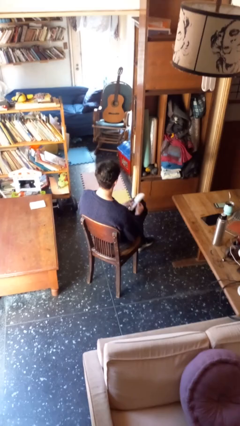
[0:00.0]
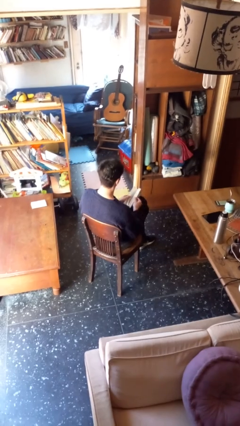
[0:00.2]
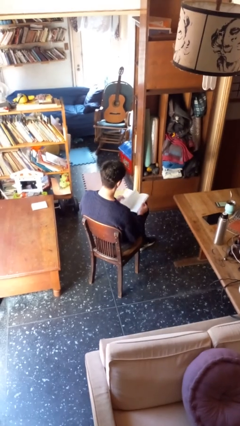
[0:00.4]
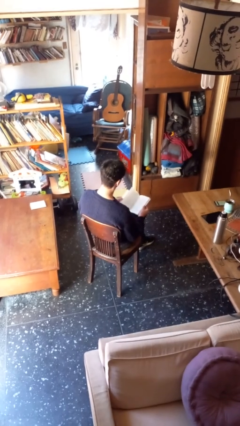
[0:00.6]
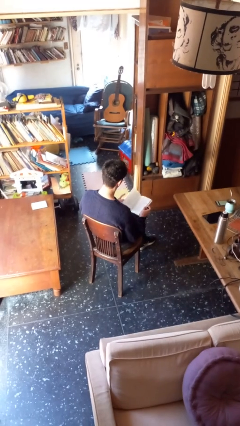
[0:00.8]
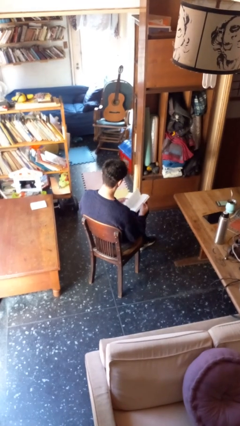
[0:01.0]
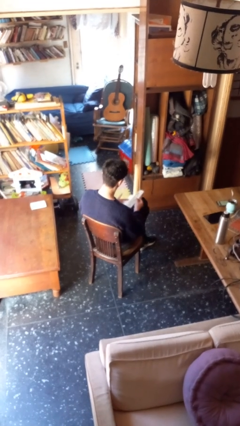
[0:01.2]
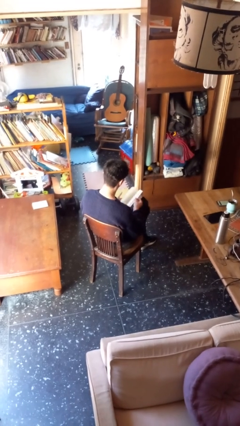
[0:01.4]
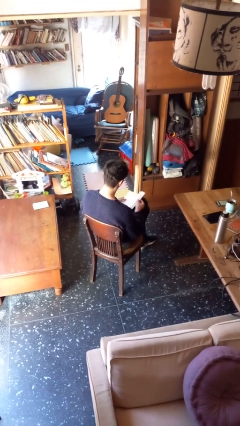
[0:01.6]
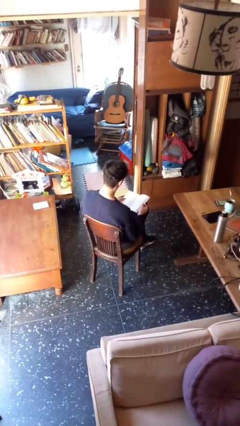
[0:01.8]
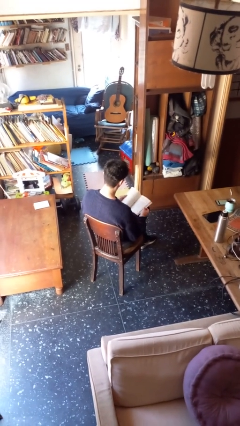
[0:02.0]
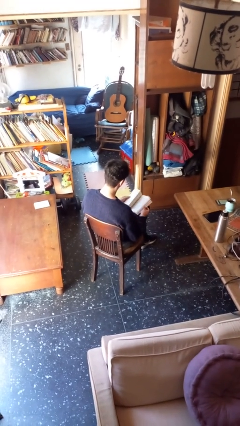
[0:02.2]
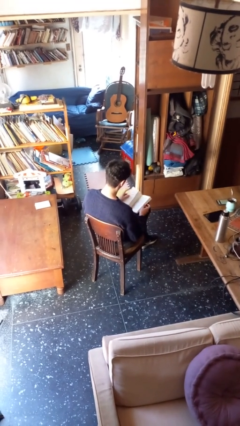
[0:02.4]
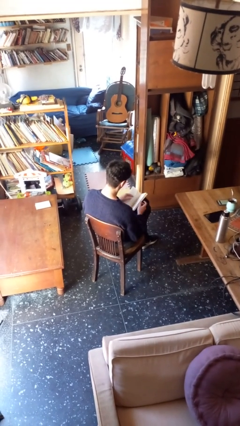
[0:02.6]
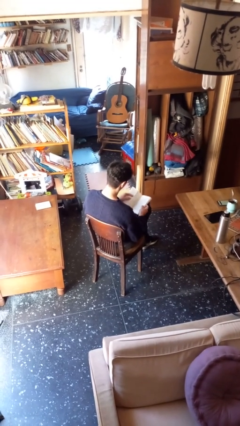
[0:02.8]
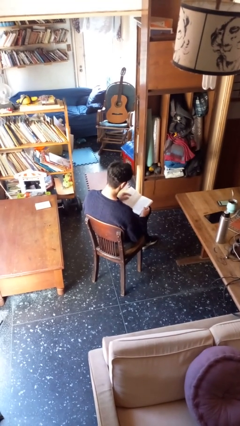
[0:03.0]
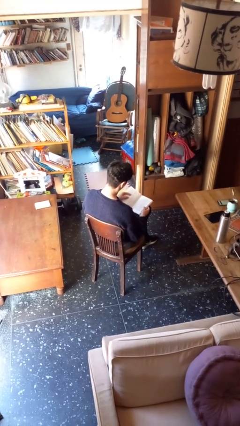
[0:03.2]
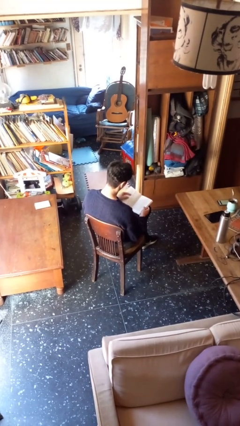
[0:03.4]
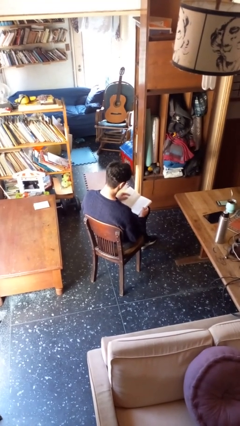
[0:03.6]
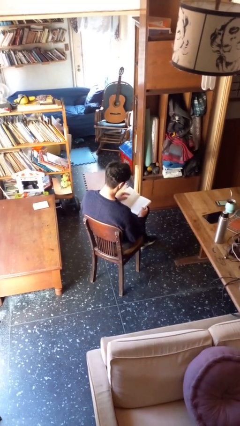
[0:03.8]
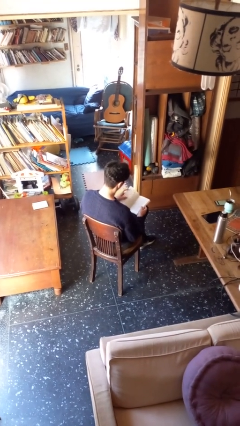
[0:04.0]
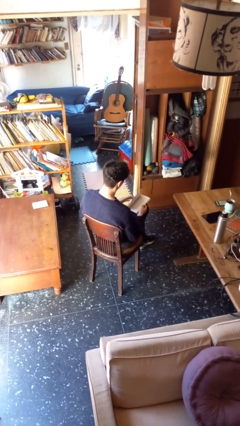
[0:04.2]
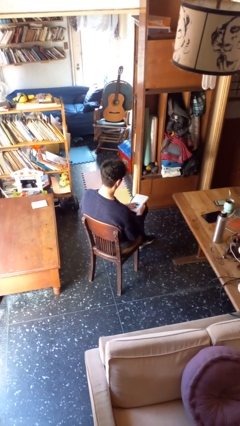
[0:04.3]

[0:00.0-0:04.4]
person reads book

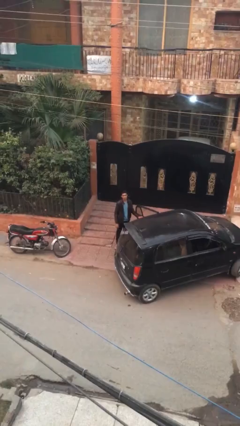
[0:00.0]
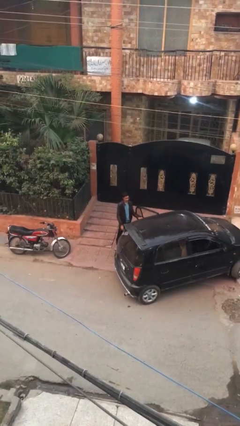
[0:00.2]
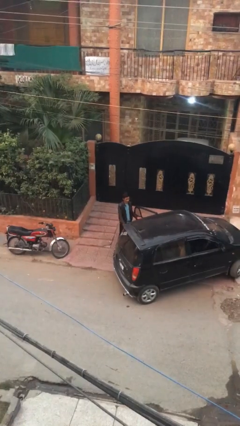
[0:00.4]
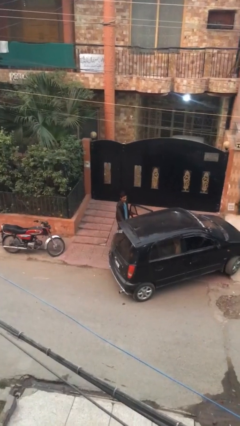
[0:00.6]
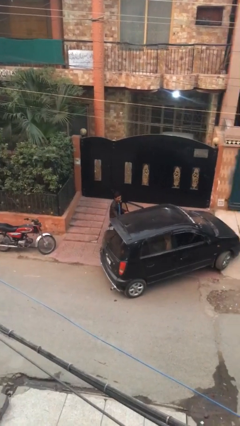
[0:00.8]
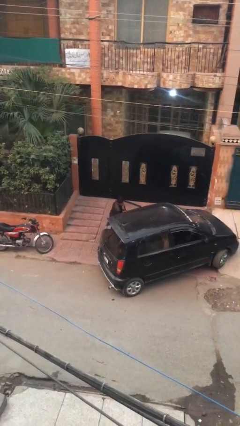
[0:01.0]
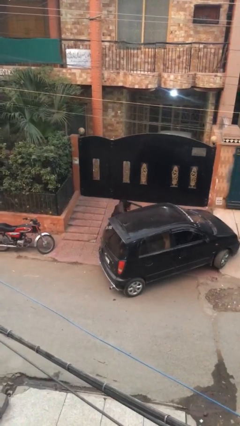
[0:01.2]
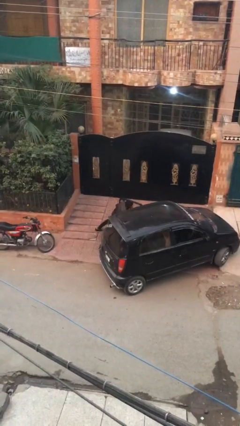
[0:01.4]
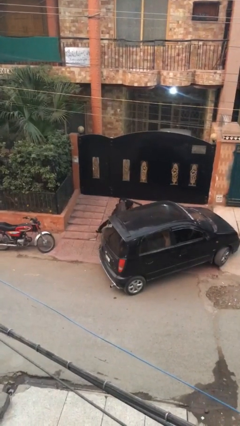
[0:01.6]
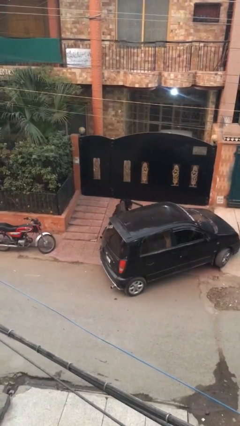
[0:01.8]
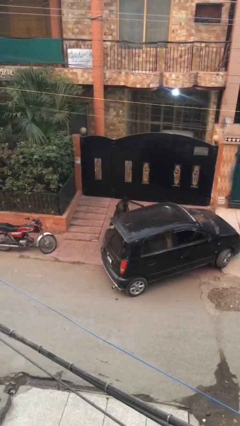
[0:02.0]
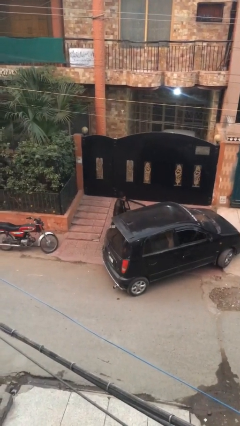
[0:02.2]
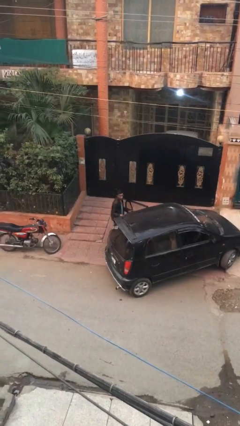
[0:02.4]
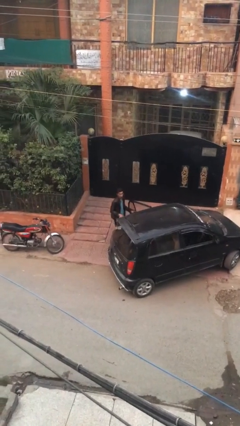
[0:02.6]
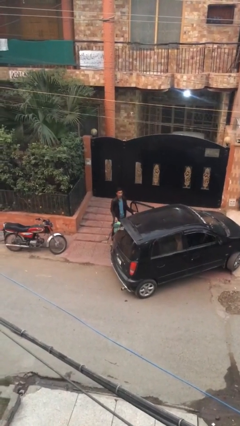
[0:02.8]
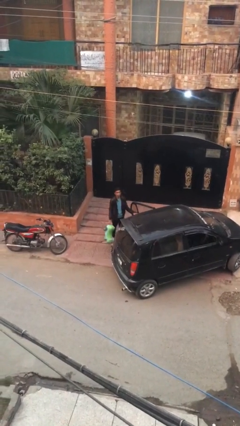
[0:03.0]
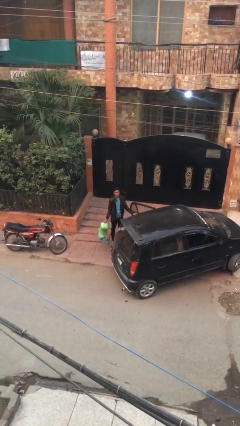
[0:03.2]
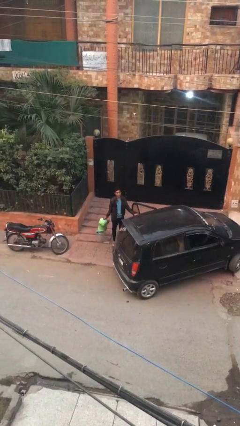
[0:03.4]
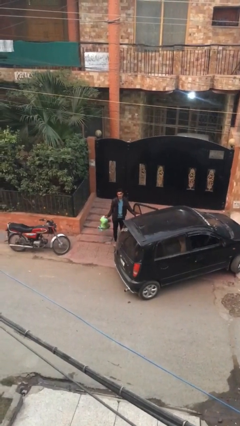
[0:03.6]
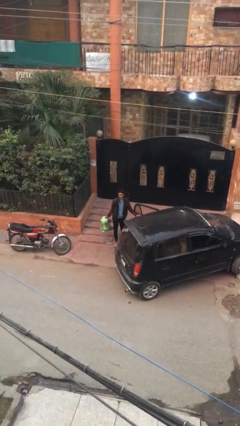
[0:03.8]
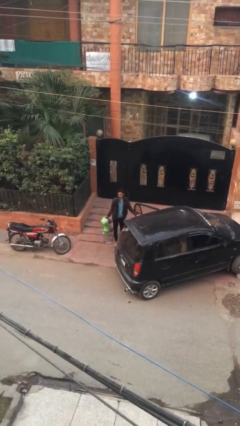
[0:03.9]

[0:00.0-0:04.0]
person unloads car

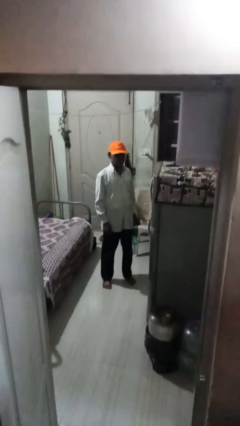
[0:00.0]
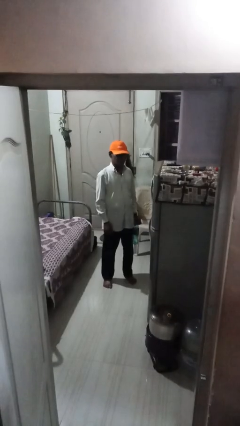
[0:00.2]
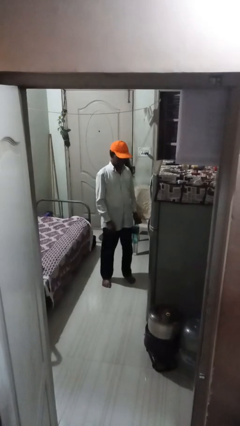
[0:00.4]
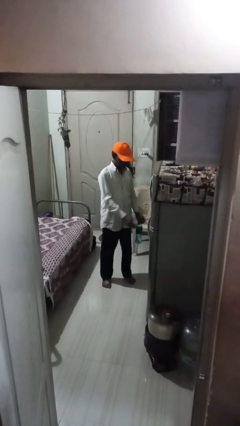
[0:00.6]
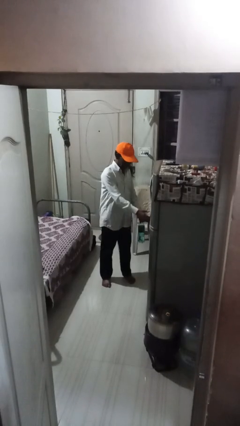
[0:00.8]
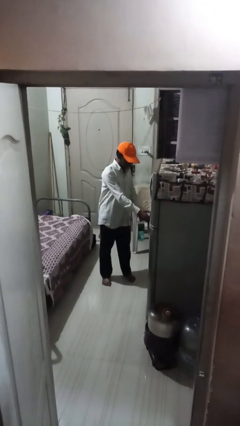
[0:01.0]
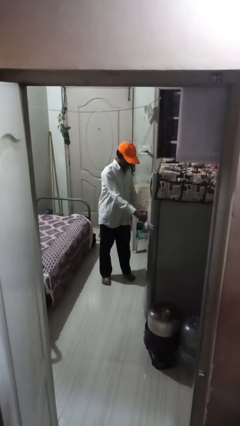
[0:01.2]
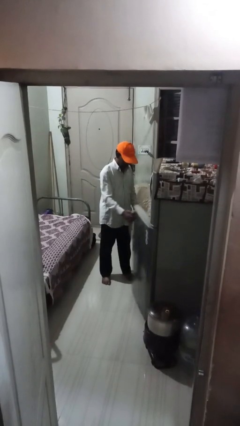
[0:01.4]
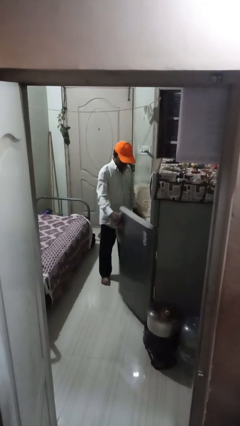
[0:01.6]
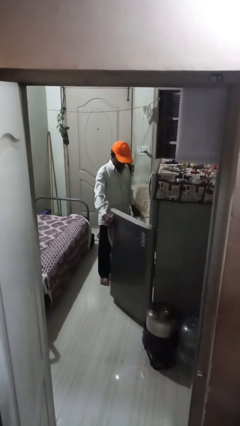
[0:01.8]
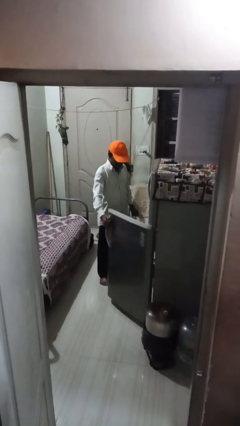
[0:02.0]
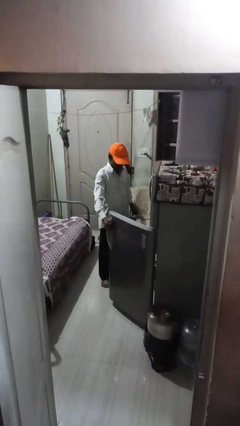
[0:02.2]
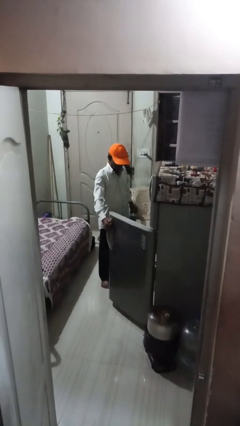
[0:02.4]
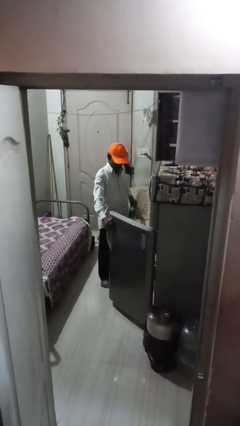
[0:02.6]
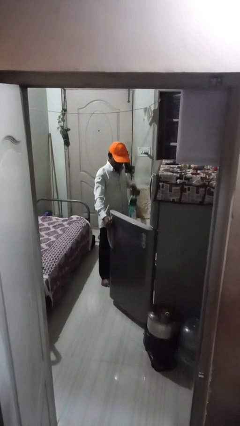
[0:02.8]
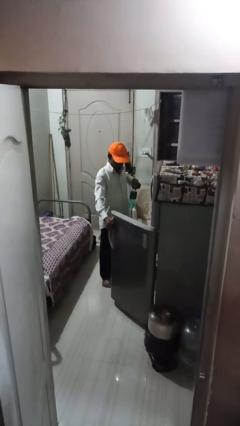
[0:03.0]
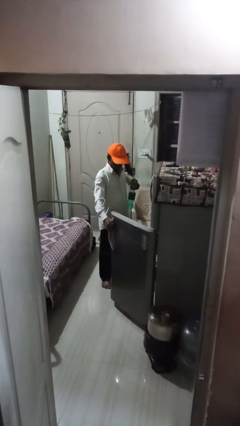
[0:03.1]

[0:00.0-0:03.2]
person opens refrigerator

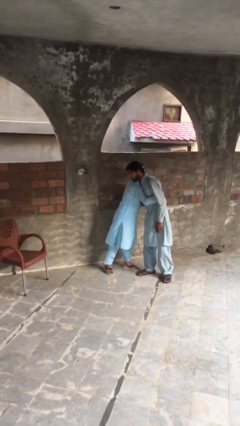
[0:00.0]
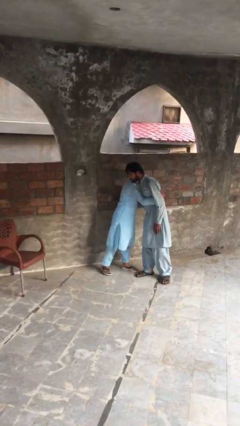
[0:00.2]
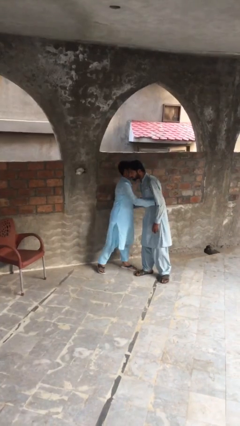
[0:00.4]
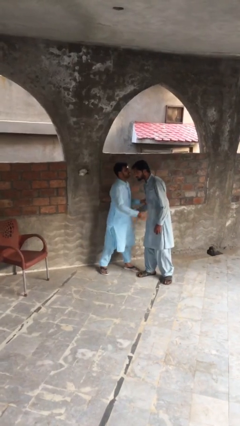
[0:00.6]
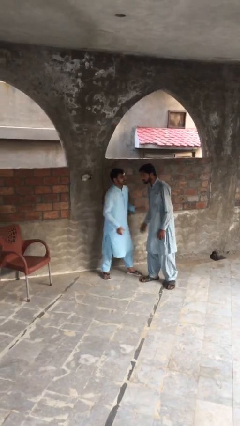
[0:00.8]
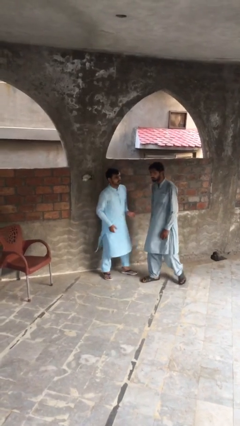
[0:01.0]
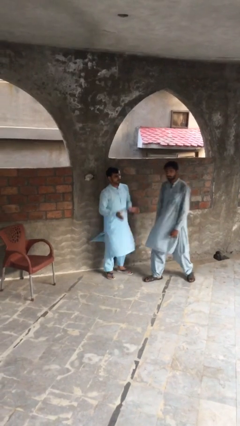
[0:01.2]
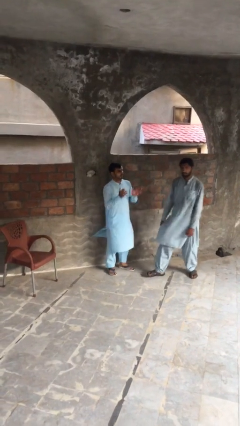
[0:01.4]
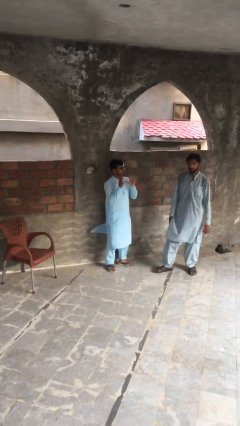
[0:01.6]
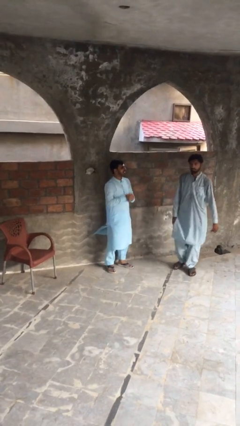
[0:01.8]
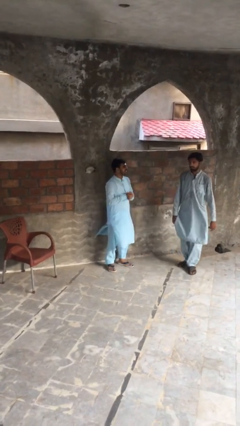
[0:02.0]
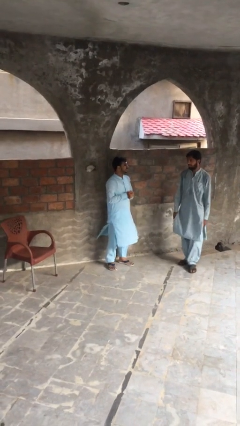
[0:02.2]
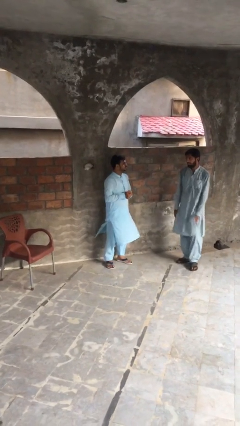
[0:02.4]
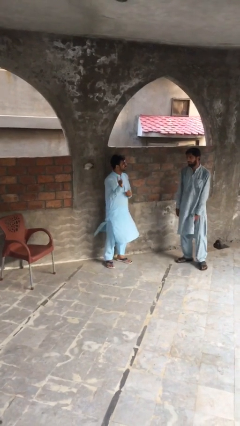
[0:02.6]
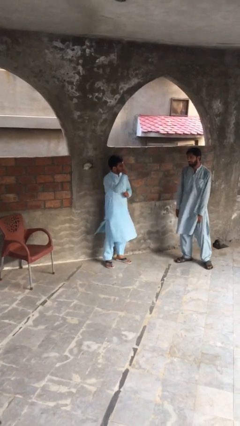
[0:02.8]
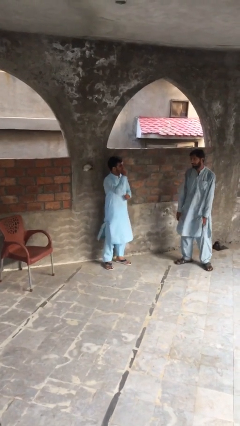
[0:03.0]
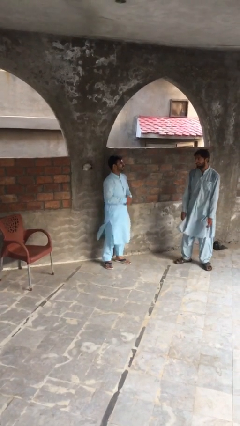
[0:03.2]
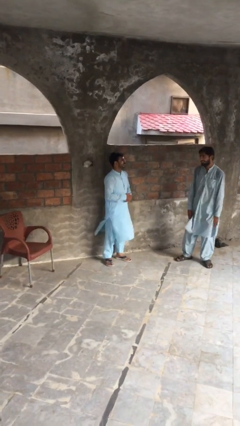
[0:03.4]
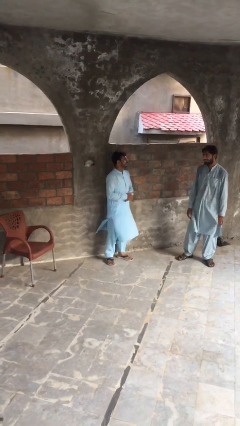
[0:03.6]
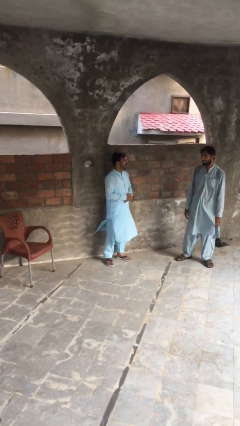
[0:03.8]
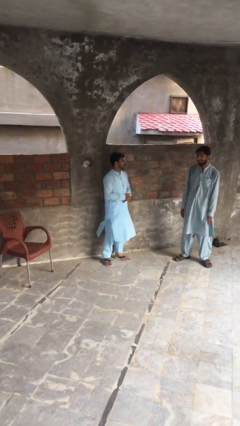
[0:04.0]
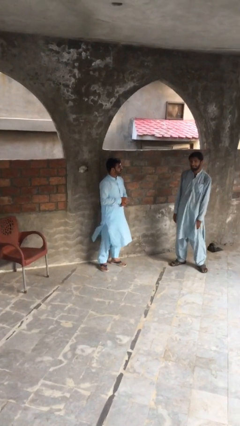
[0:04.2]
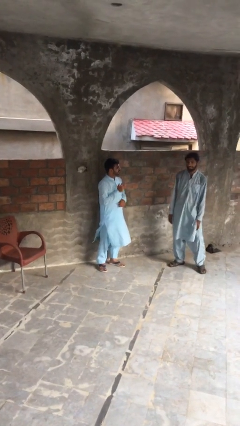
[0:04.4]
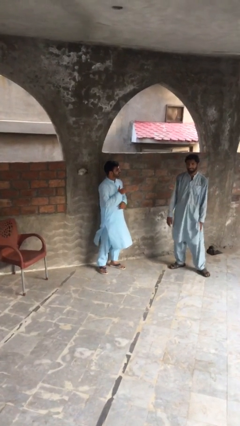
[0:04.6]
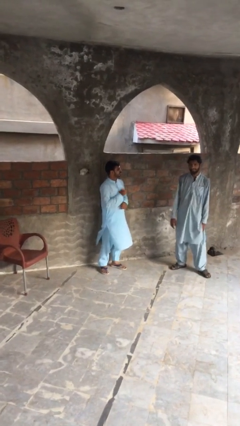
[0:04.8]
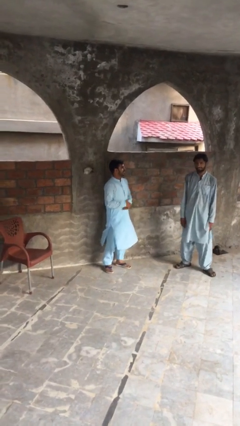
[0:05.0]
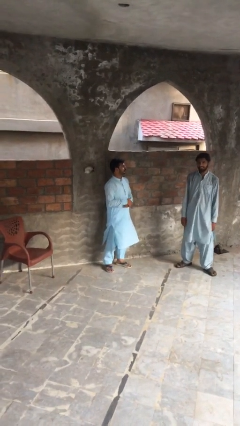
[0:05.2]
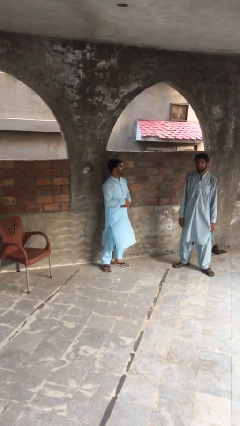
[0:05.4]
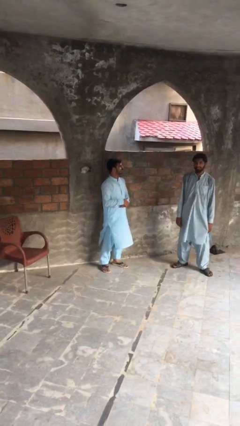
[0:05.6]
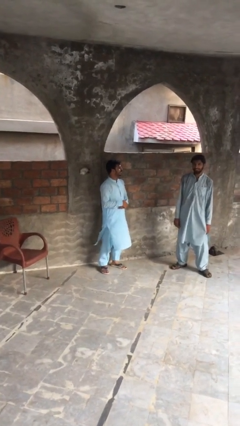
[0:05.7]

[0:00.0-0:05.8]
person talks to person

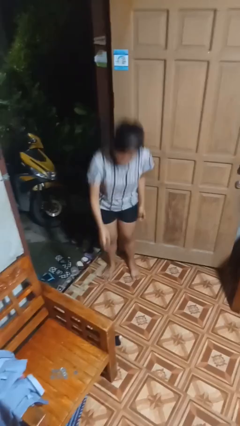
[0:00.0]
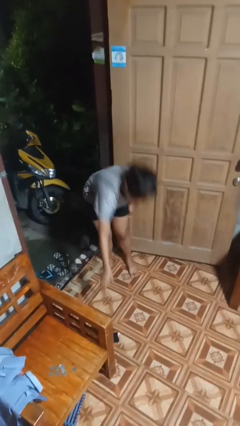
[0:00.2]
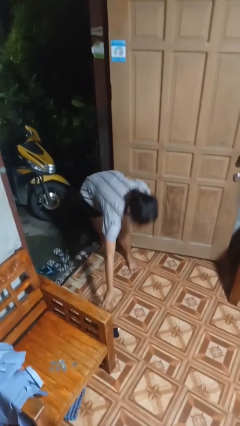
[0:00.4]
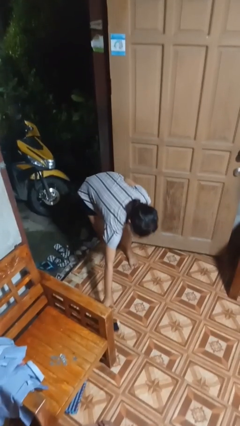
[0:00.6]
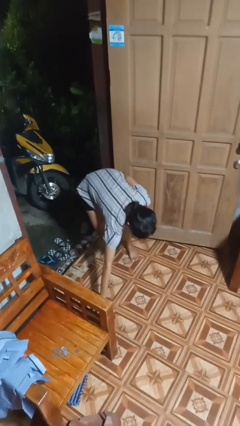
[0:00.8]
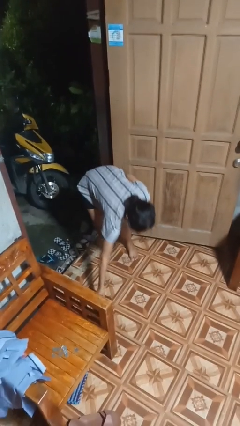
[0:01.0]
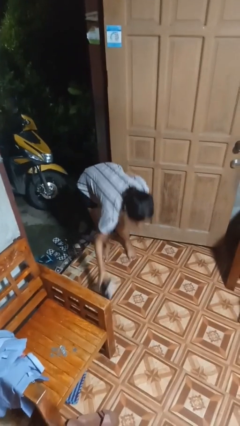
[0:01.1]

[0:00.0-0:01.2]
person picks up object from floor
